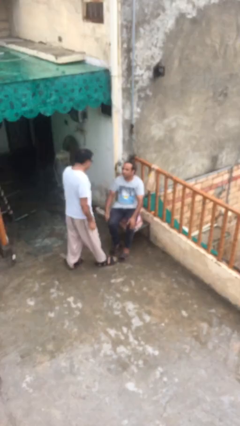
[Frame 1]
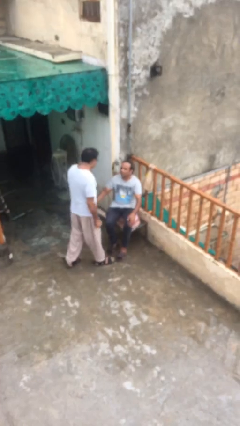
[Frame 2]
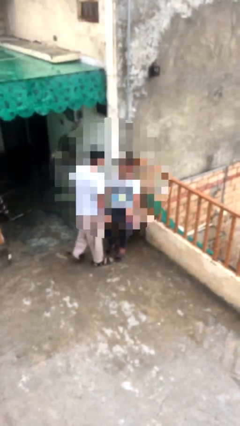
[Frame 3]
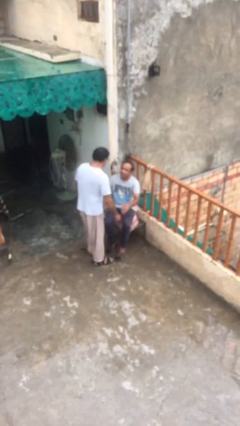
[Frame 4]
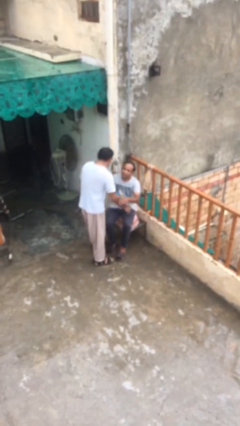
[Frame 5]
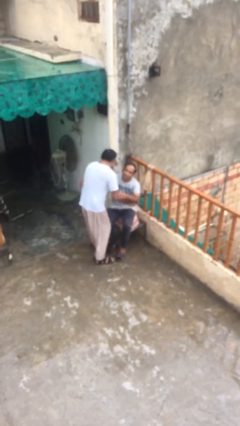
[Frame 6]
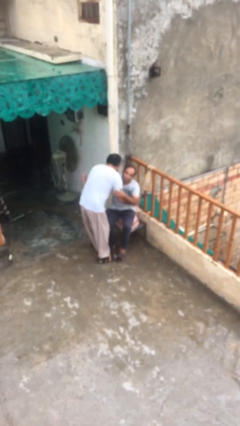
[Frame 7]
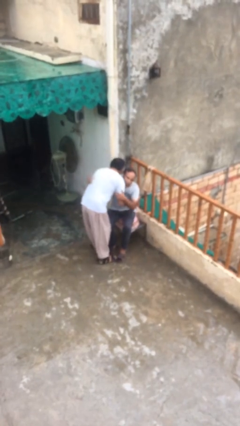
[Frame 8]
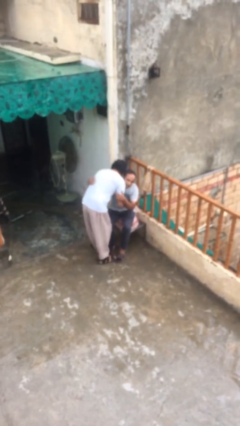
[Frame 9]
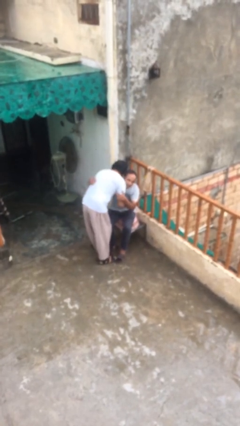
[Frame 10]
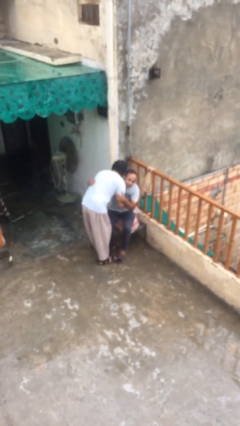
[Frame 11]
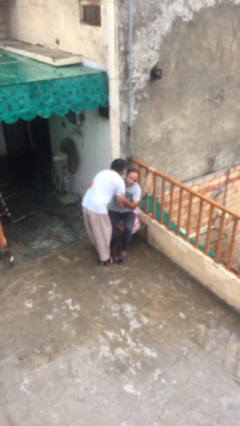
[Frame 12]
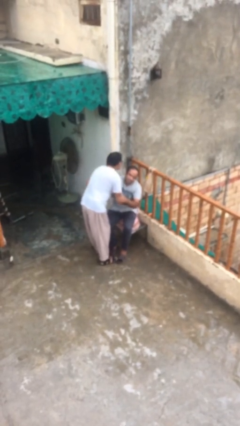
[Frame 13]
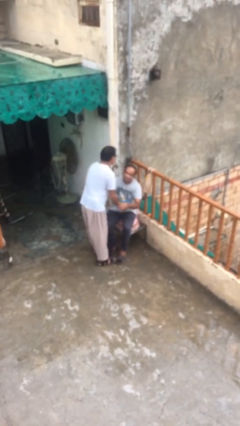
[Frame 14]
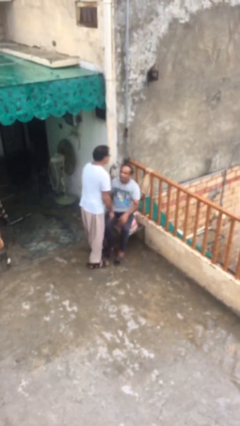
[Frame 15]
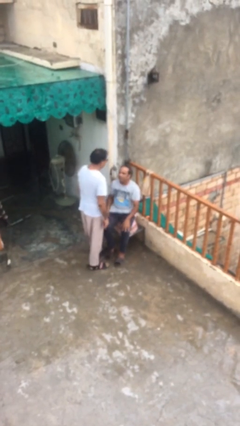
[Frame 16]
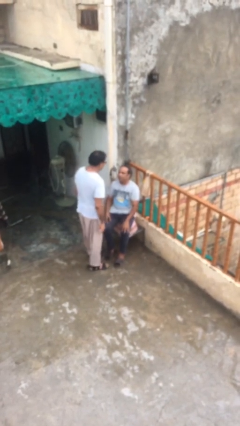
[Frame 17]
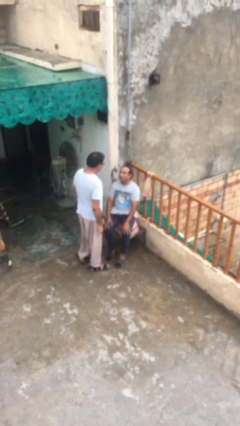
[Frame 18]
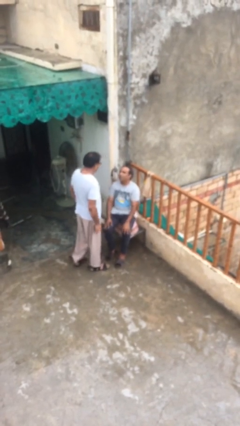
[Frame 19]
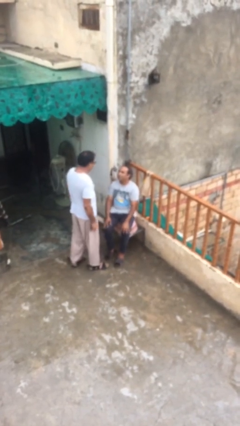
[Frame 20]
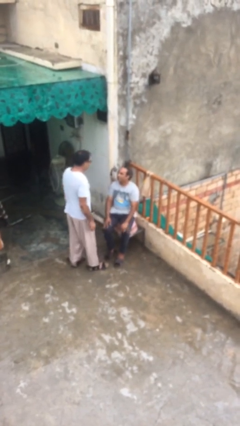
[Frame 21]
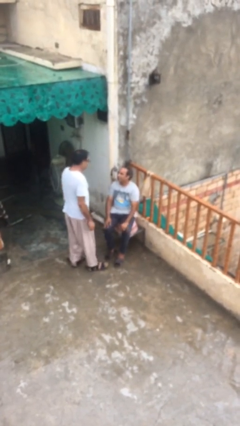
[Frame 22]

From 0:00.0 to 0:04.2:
person embraces person

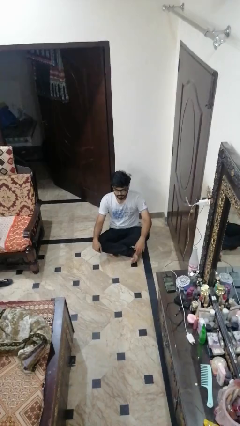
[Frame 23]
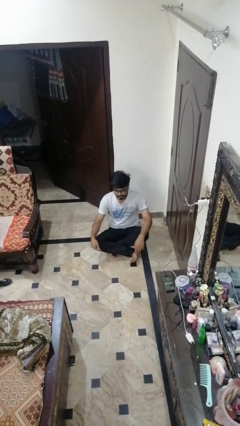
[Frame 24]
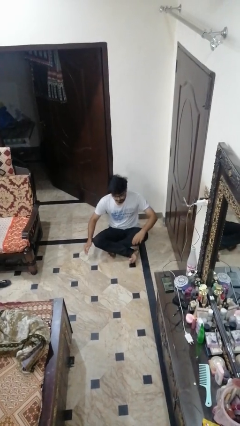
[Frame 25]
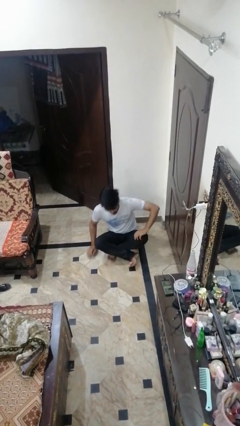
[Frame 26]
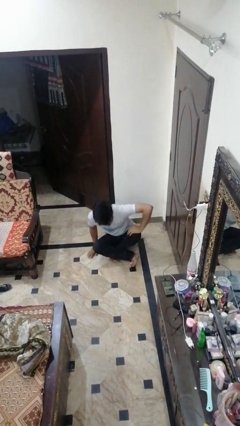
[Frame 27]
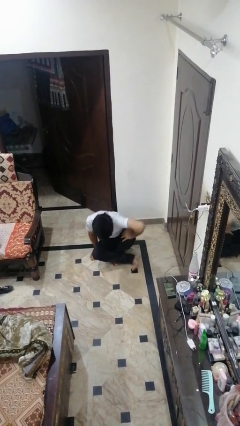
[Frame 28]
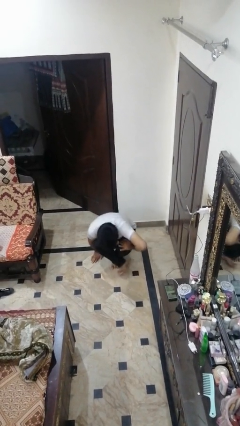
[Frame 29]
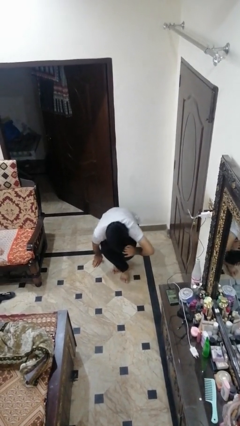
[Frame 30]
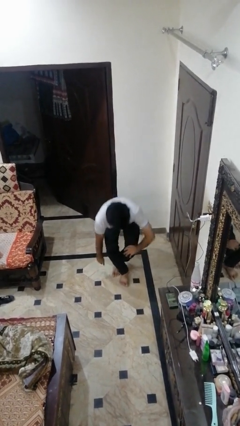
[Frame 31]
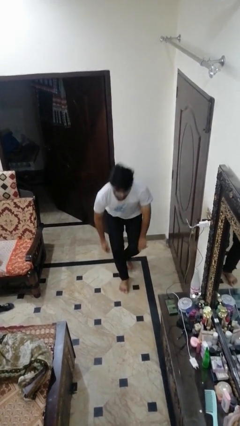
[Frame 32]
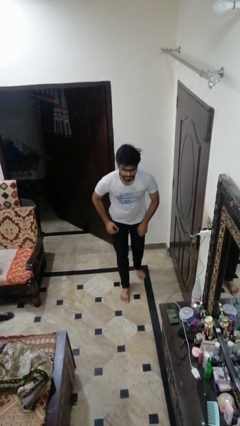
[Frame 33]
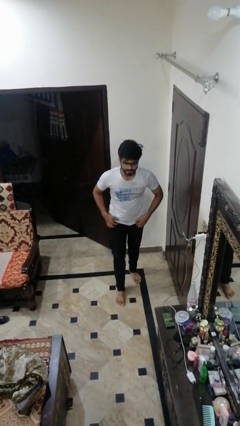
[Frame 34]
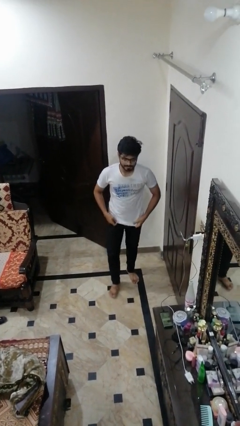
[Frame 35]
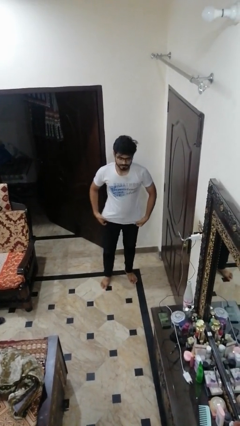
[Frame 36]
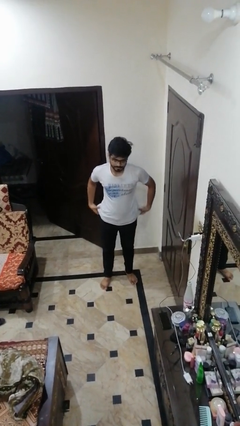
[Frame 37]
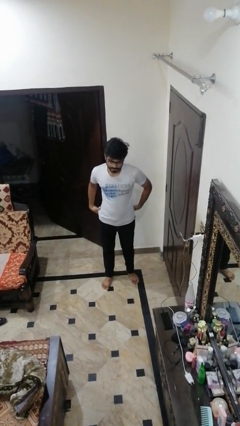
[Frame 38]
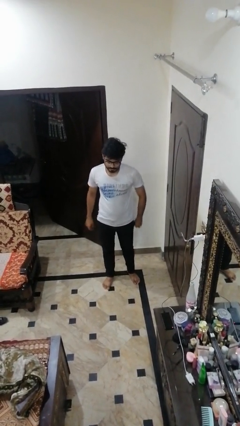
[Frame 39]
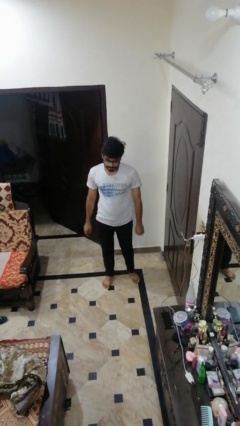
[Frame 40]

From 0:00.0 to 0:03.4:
person stands up from floor

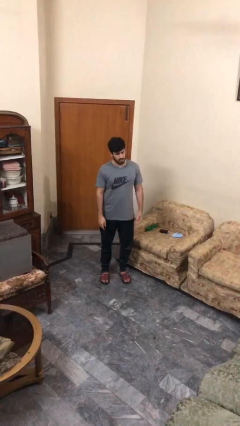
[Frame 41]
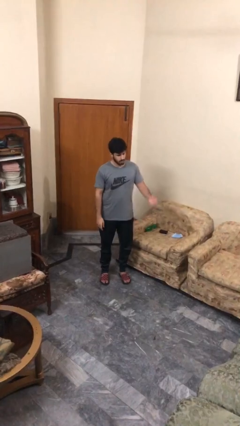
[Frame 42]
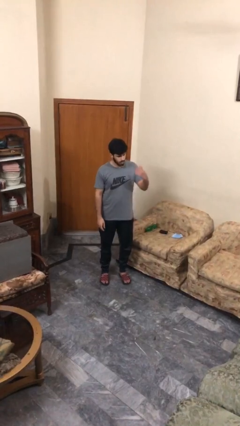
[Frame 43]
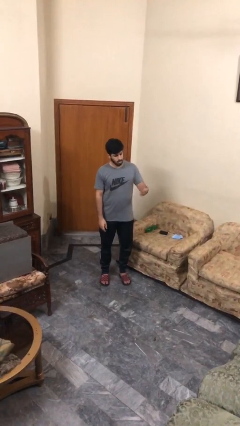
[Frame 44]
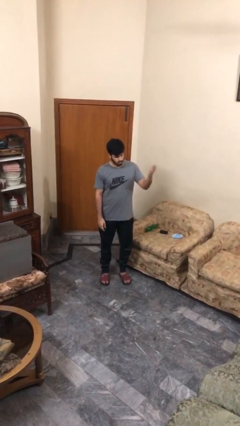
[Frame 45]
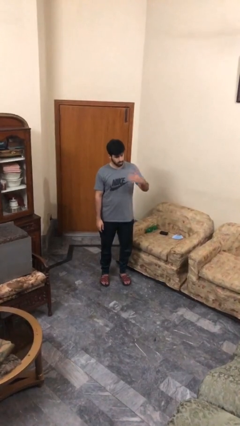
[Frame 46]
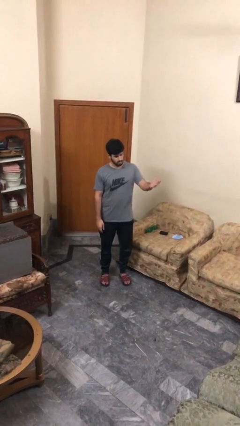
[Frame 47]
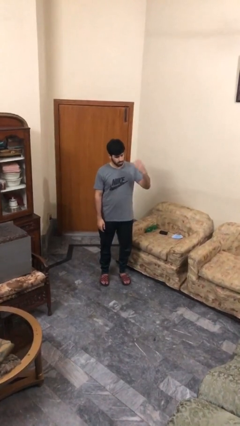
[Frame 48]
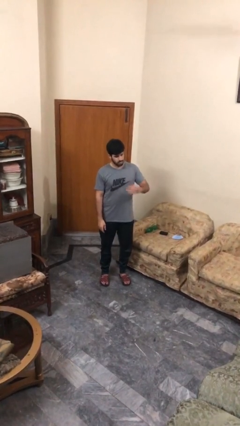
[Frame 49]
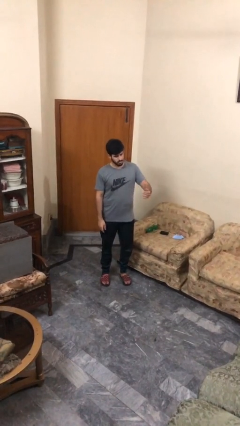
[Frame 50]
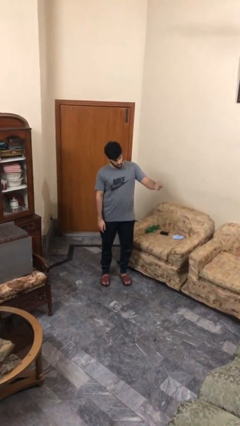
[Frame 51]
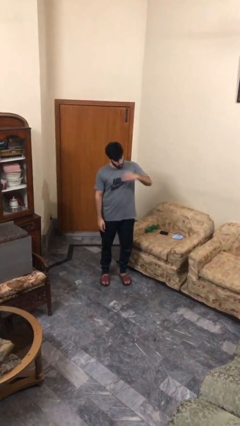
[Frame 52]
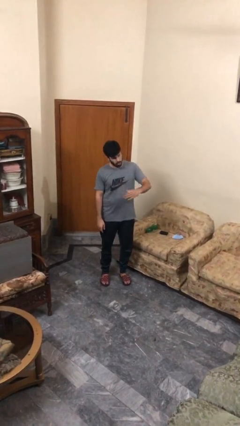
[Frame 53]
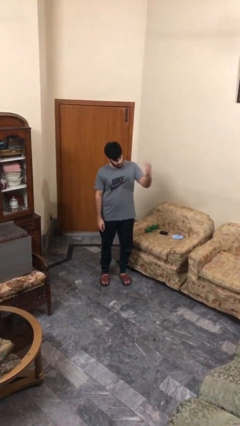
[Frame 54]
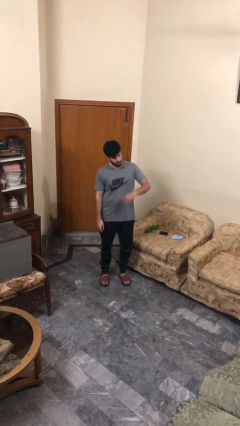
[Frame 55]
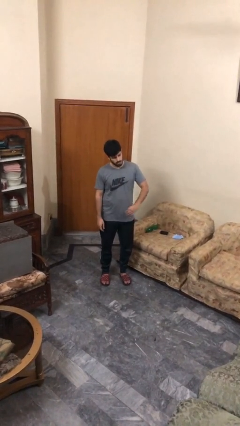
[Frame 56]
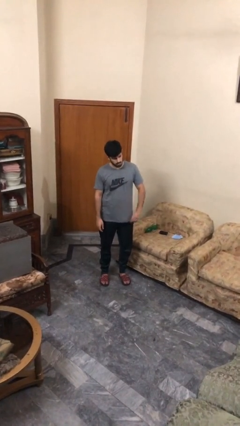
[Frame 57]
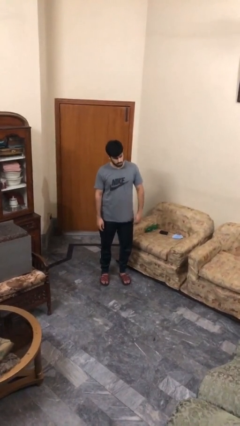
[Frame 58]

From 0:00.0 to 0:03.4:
person gestures come here

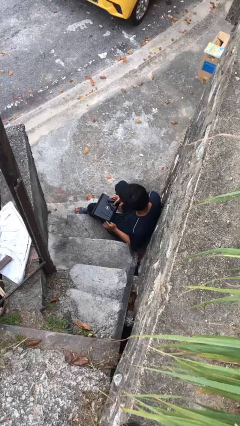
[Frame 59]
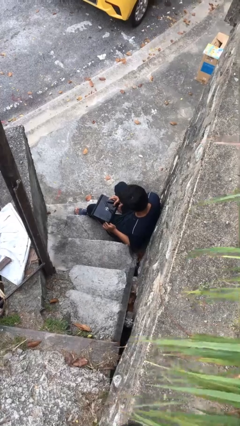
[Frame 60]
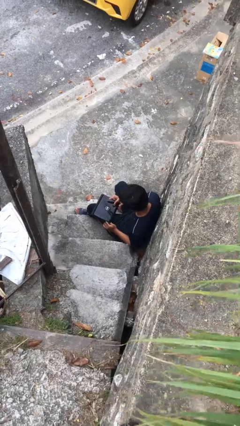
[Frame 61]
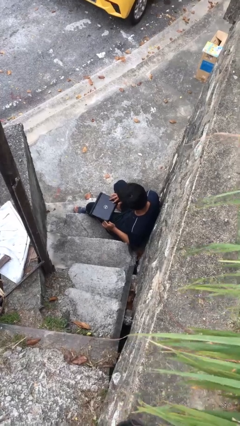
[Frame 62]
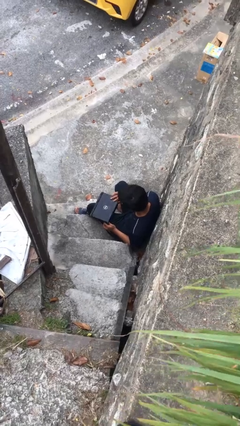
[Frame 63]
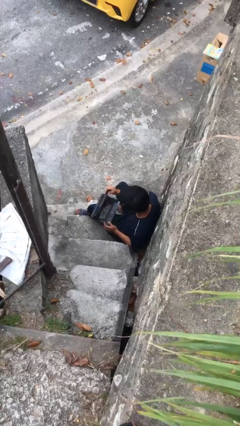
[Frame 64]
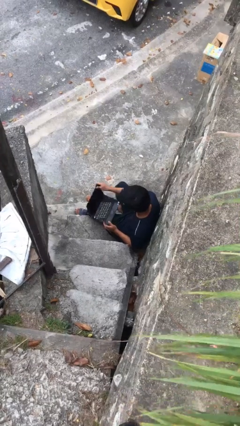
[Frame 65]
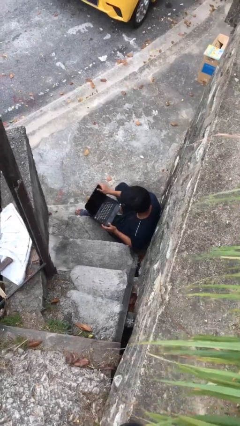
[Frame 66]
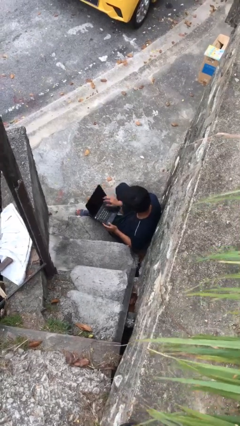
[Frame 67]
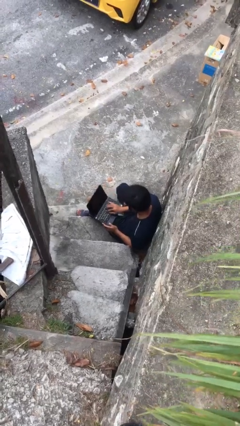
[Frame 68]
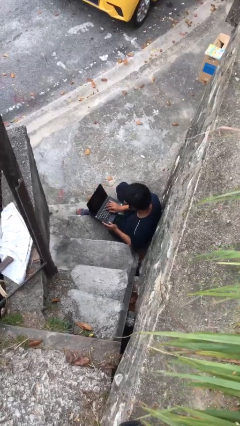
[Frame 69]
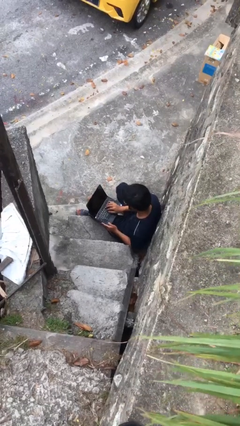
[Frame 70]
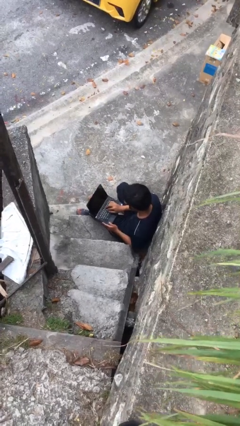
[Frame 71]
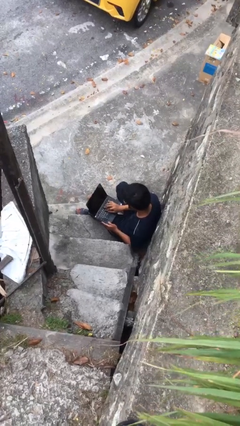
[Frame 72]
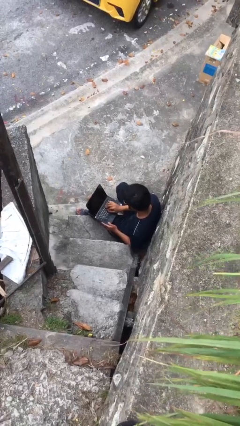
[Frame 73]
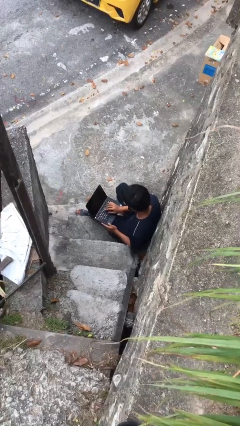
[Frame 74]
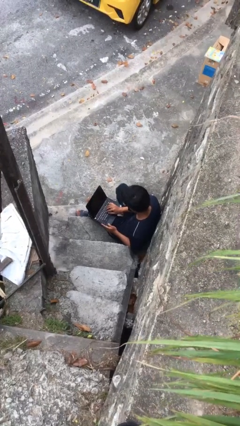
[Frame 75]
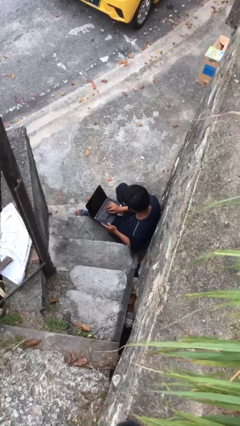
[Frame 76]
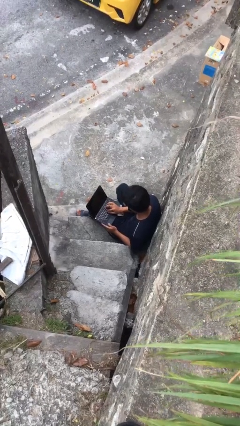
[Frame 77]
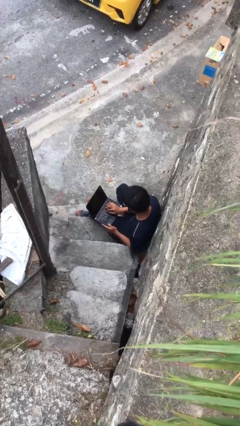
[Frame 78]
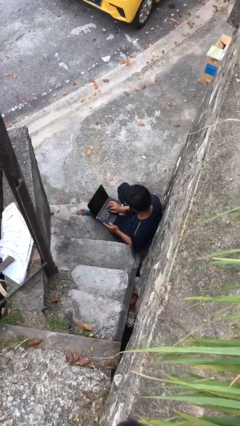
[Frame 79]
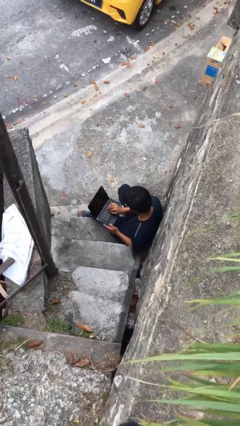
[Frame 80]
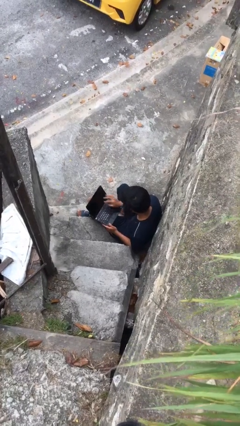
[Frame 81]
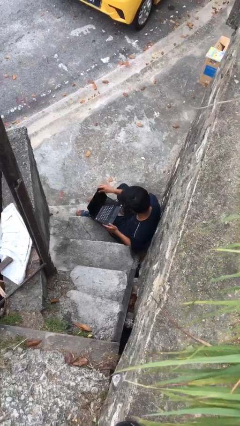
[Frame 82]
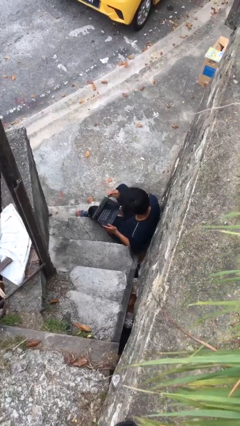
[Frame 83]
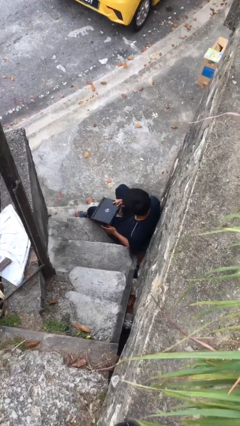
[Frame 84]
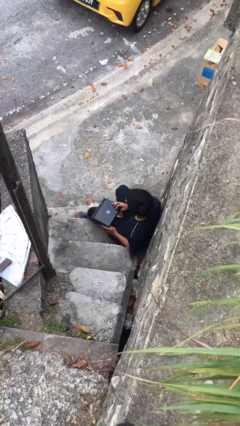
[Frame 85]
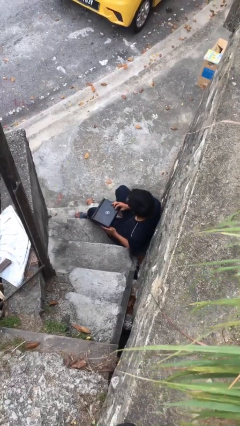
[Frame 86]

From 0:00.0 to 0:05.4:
person interacts with laptop

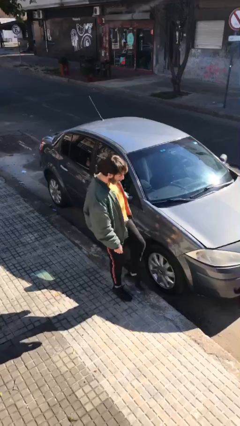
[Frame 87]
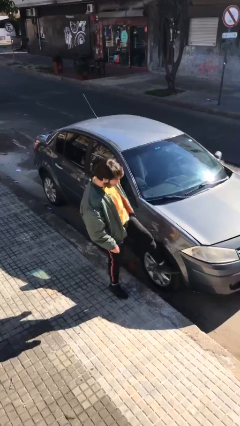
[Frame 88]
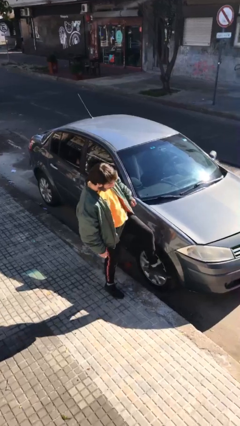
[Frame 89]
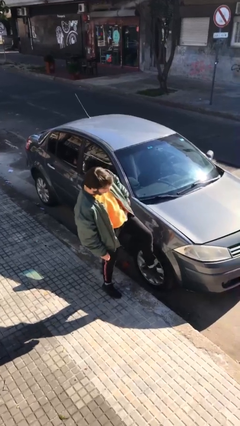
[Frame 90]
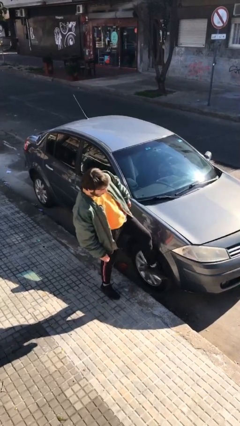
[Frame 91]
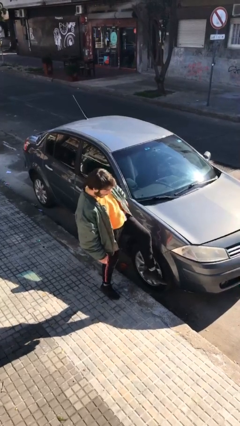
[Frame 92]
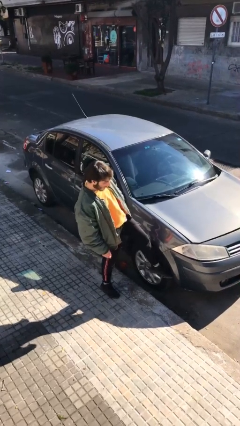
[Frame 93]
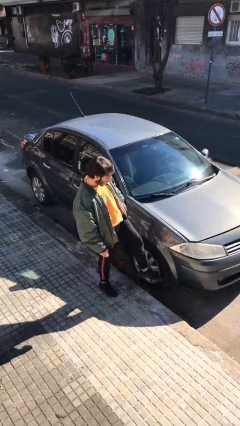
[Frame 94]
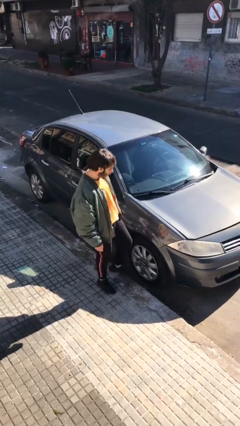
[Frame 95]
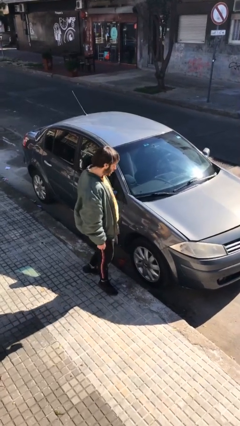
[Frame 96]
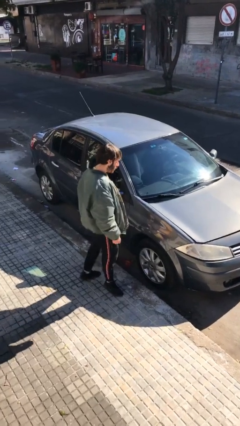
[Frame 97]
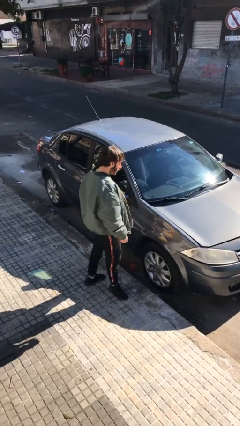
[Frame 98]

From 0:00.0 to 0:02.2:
person kicks car tires
